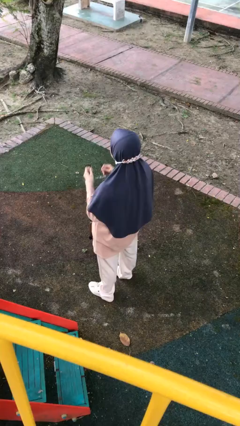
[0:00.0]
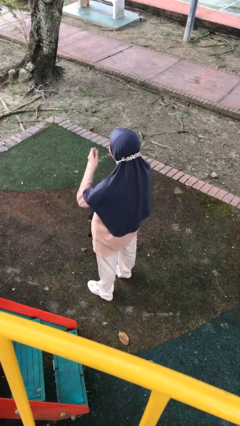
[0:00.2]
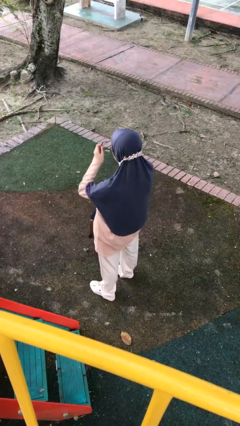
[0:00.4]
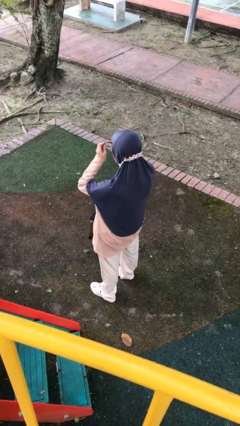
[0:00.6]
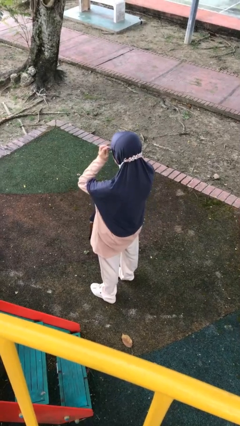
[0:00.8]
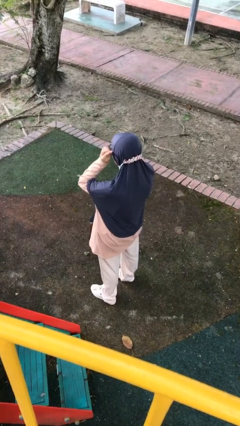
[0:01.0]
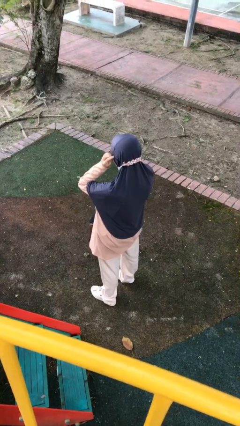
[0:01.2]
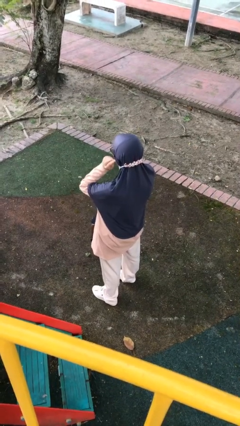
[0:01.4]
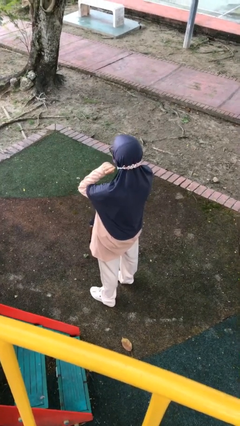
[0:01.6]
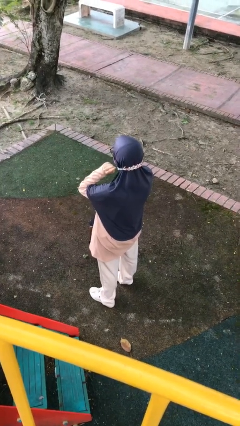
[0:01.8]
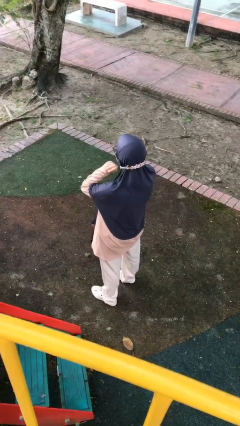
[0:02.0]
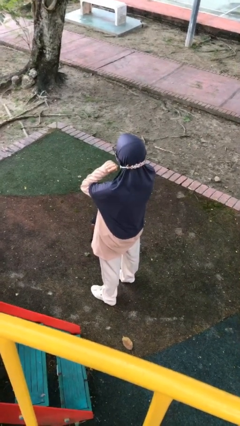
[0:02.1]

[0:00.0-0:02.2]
person puts on glasses

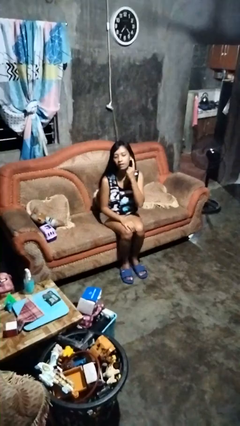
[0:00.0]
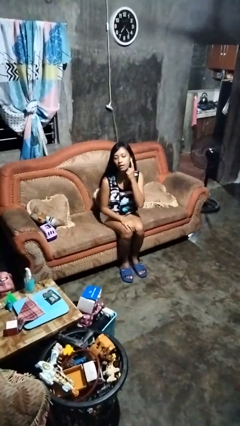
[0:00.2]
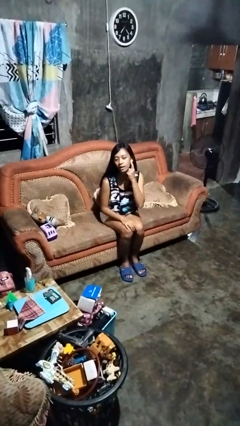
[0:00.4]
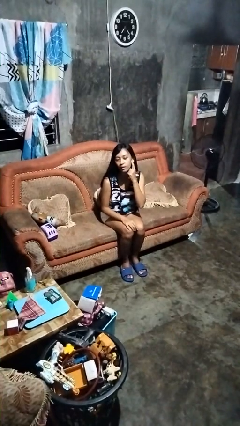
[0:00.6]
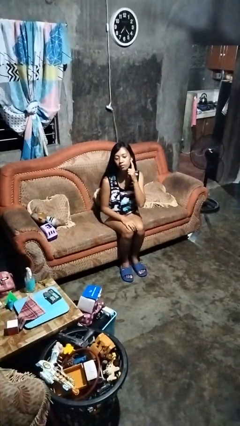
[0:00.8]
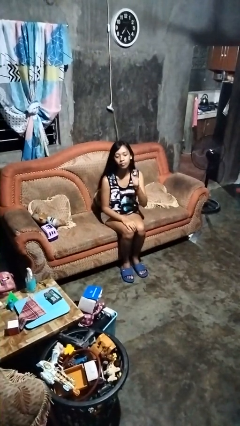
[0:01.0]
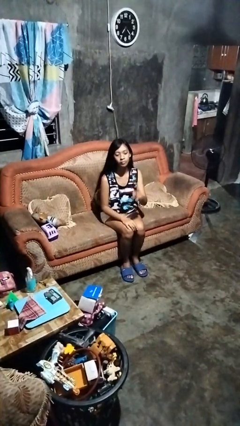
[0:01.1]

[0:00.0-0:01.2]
person gestures listen closely

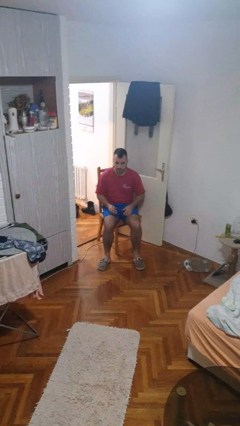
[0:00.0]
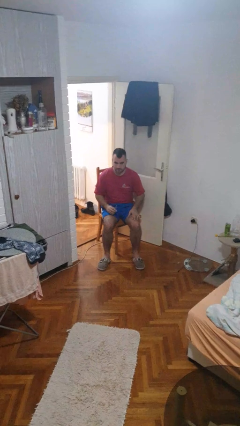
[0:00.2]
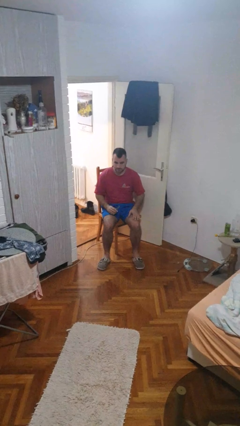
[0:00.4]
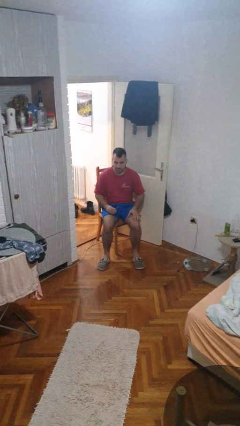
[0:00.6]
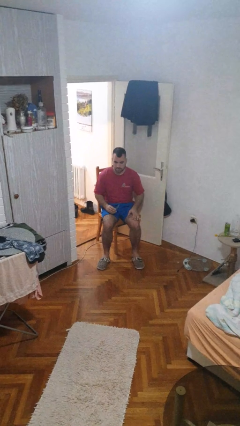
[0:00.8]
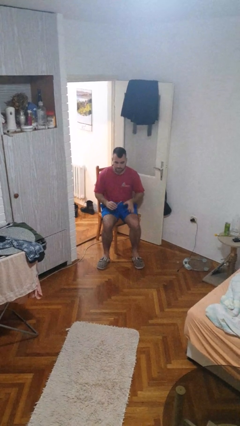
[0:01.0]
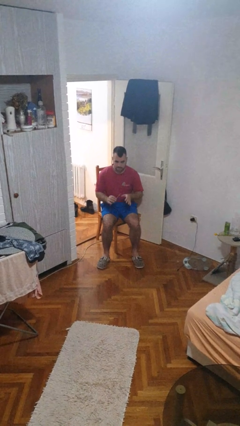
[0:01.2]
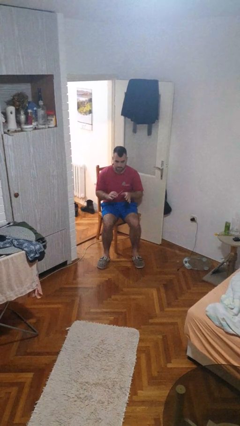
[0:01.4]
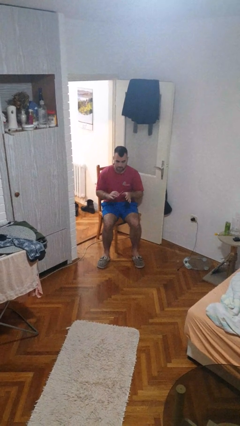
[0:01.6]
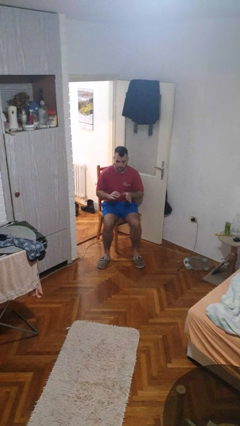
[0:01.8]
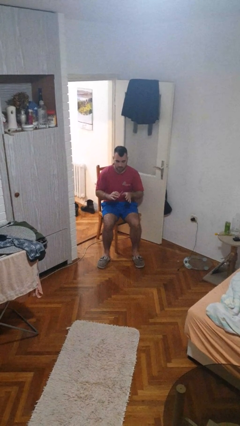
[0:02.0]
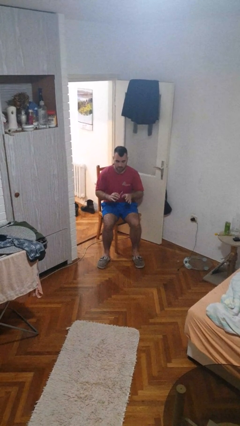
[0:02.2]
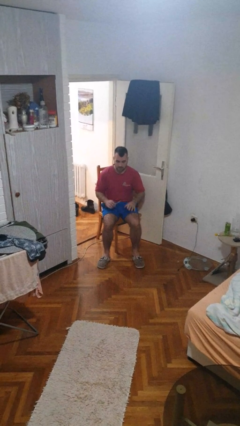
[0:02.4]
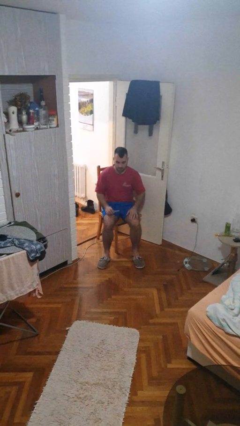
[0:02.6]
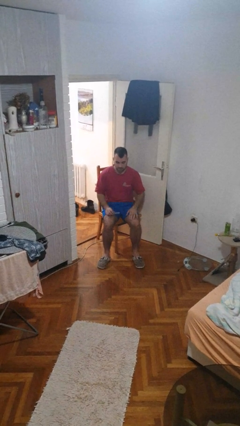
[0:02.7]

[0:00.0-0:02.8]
person files fingernails

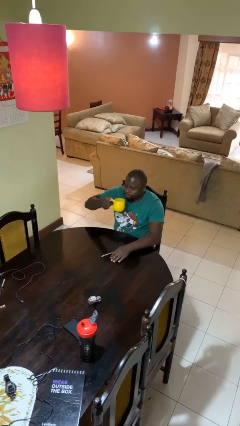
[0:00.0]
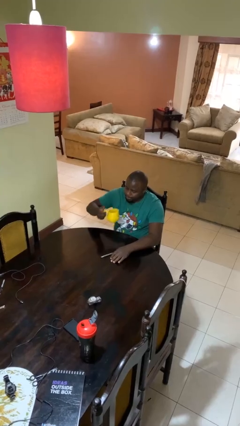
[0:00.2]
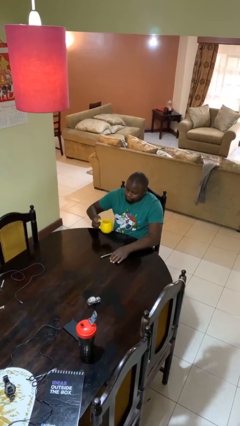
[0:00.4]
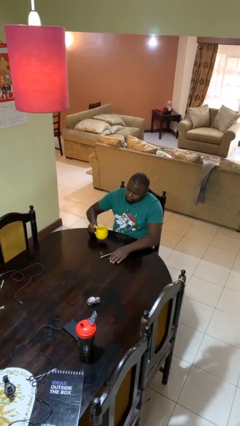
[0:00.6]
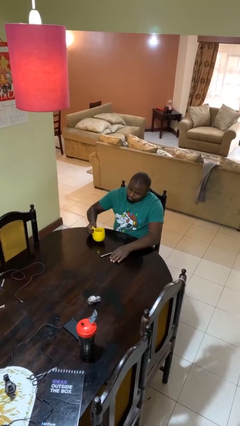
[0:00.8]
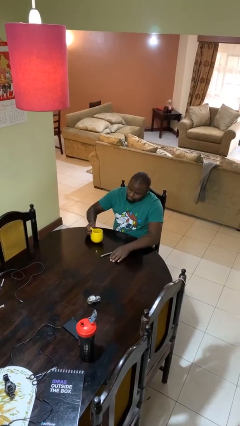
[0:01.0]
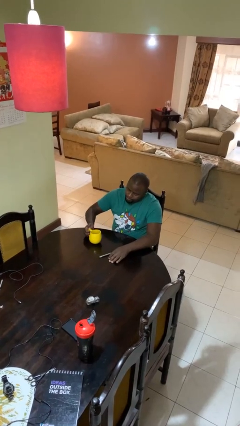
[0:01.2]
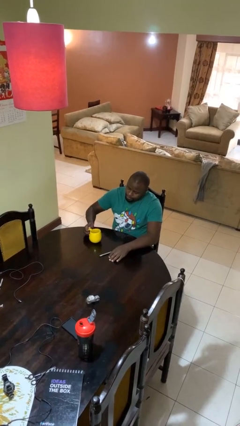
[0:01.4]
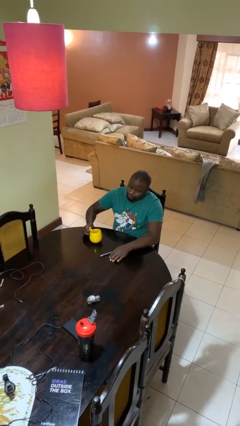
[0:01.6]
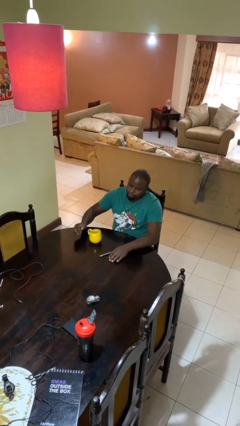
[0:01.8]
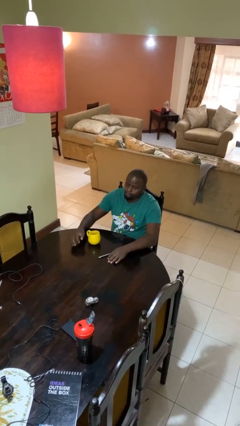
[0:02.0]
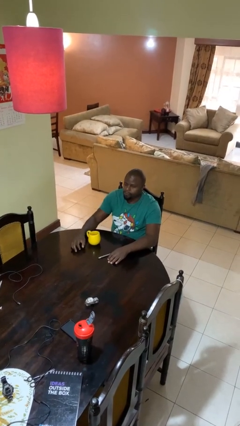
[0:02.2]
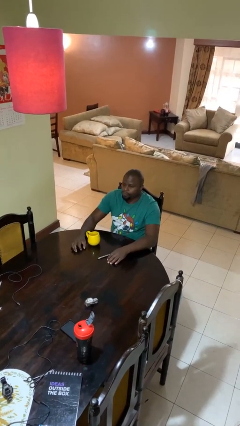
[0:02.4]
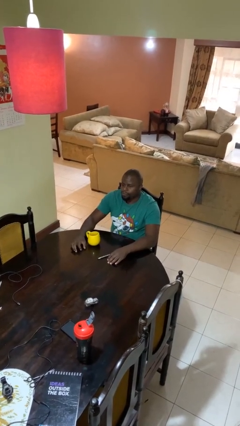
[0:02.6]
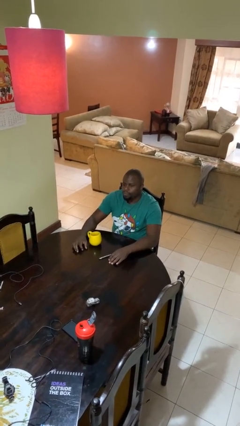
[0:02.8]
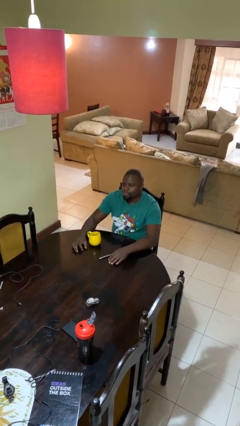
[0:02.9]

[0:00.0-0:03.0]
person puts down object on table

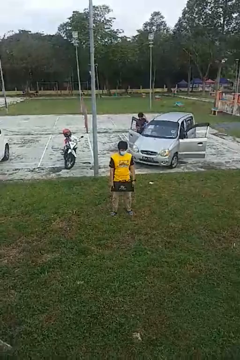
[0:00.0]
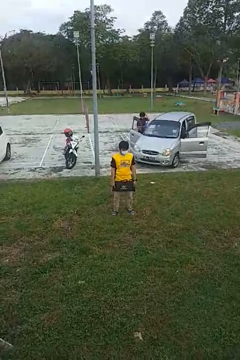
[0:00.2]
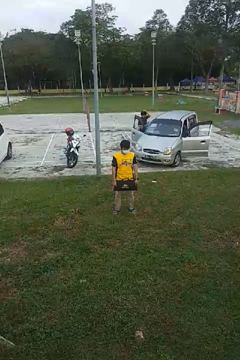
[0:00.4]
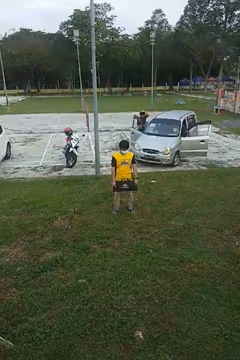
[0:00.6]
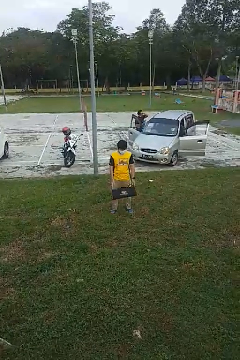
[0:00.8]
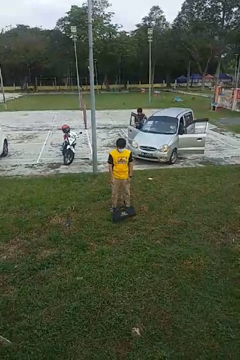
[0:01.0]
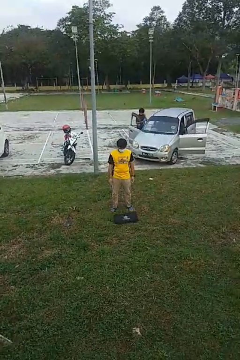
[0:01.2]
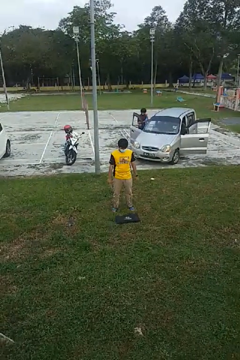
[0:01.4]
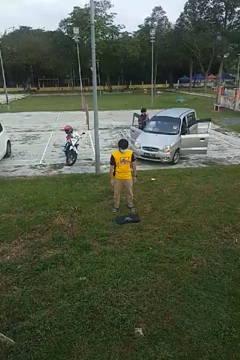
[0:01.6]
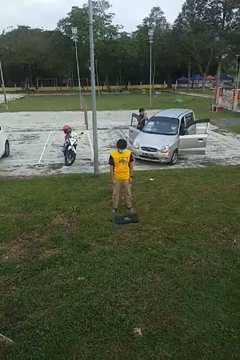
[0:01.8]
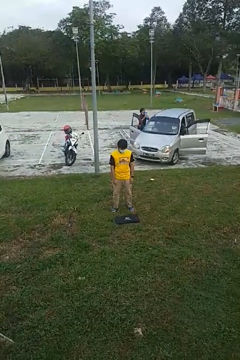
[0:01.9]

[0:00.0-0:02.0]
person drops object

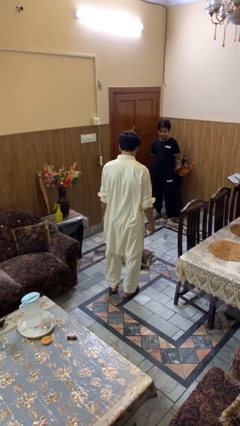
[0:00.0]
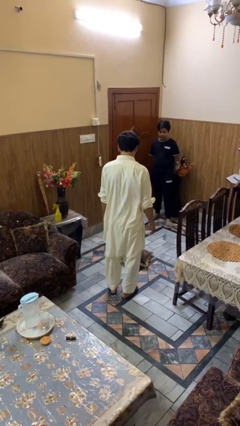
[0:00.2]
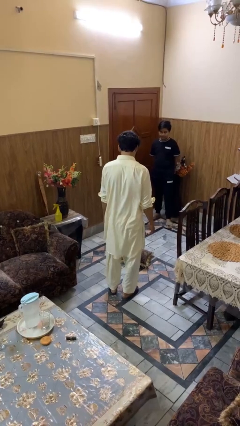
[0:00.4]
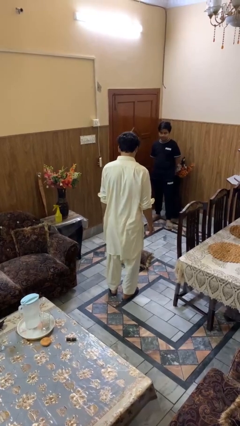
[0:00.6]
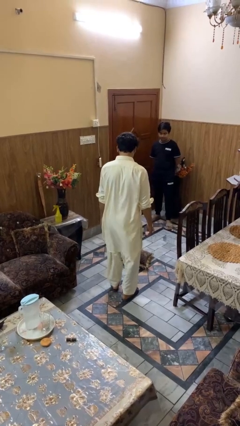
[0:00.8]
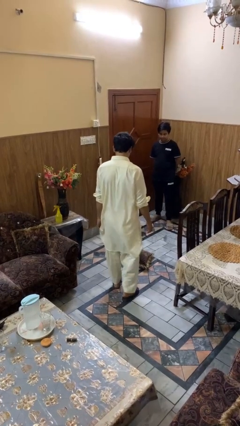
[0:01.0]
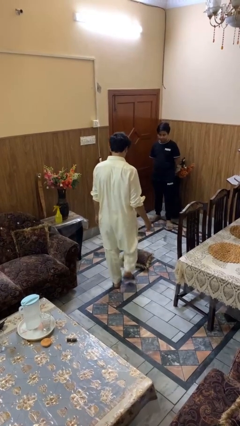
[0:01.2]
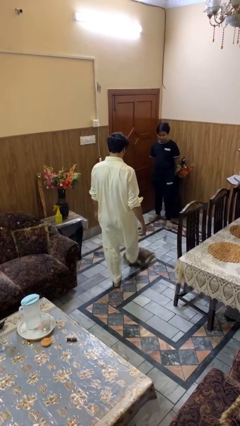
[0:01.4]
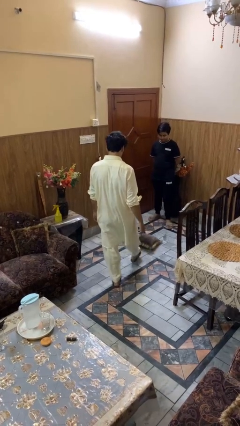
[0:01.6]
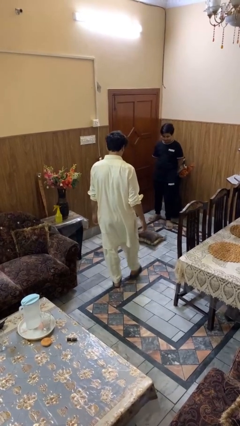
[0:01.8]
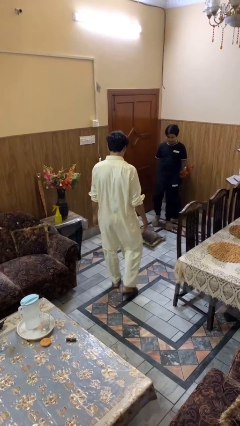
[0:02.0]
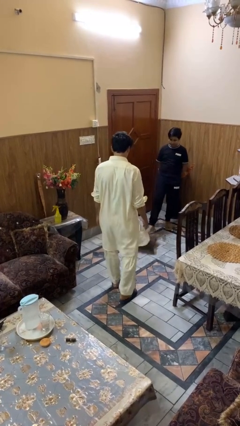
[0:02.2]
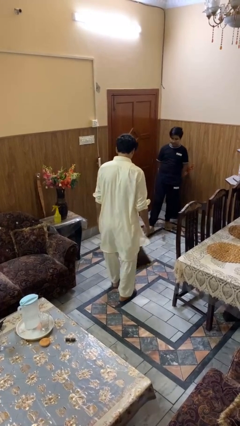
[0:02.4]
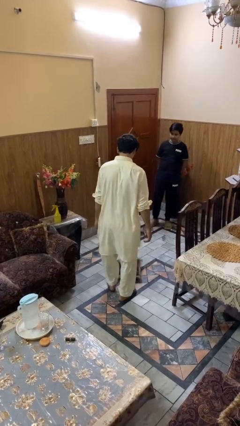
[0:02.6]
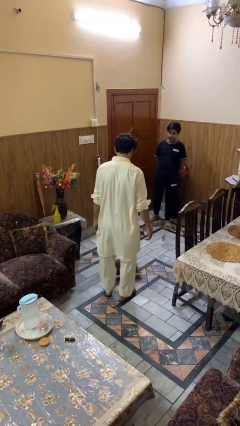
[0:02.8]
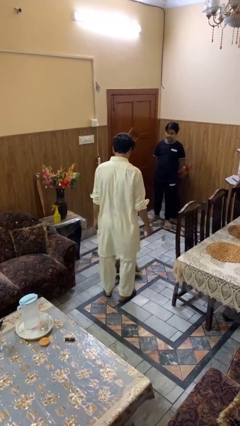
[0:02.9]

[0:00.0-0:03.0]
person kicks object to person

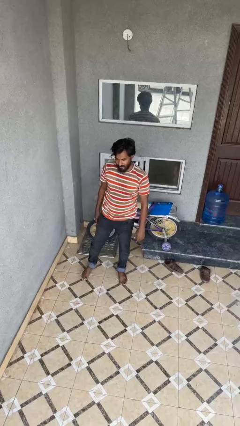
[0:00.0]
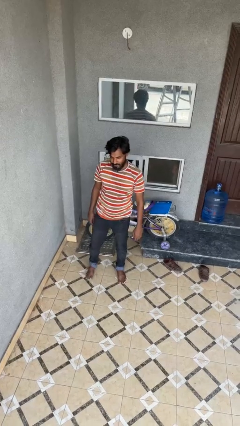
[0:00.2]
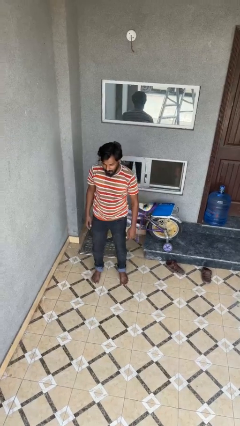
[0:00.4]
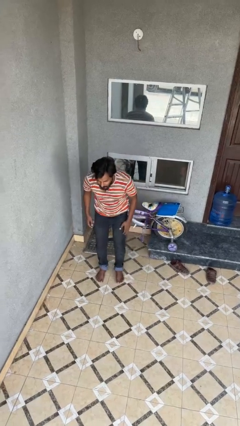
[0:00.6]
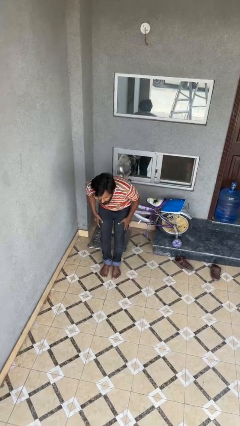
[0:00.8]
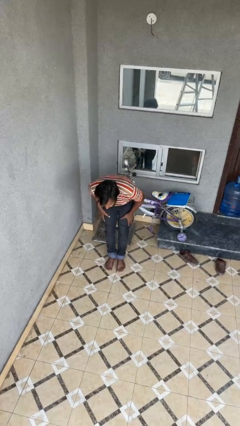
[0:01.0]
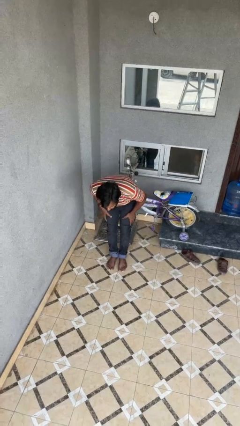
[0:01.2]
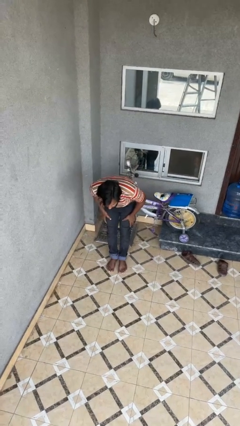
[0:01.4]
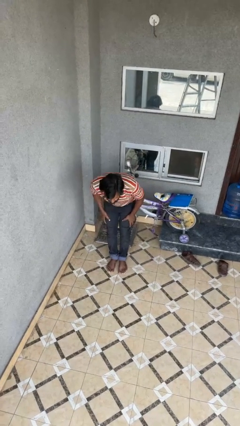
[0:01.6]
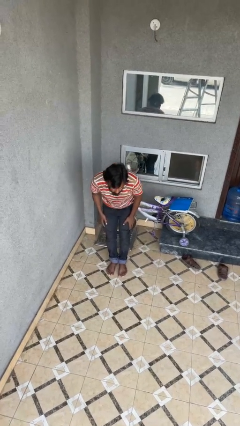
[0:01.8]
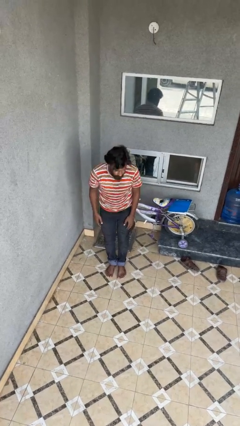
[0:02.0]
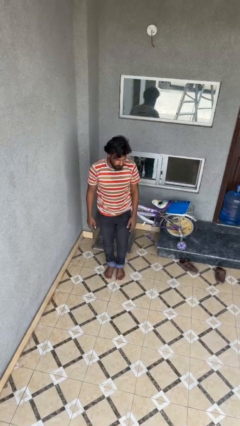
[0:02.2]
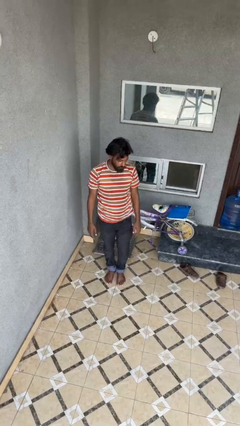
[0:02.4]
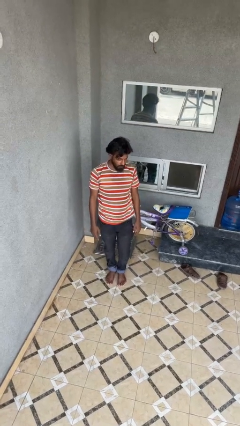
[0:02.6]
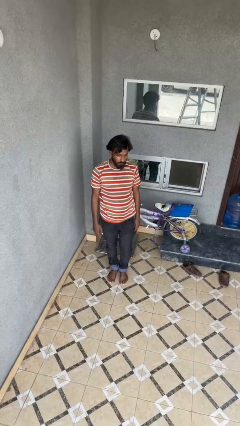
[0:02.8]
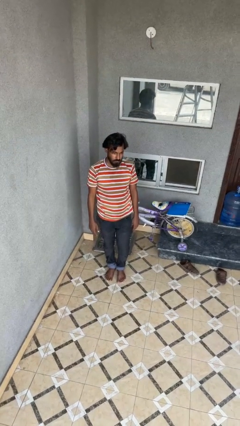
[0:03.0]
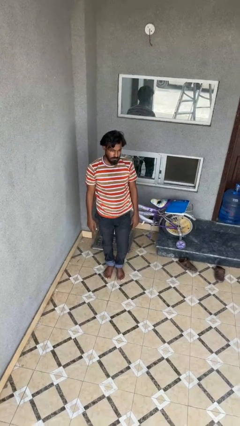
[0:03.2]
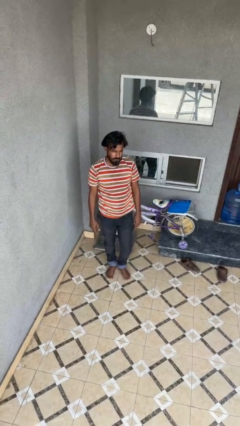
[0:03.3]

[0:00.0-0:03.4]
person bows
